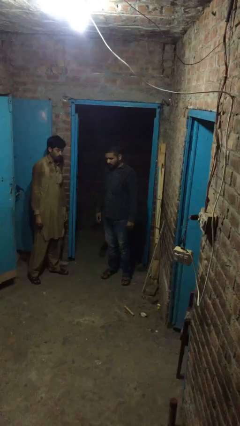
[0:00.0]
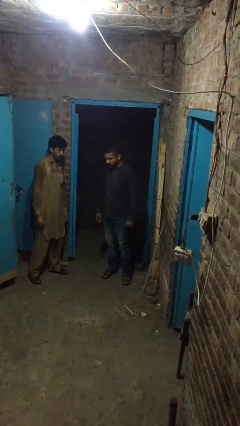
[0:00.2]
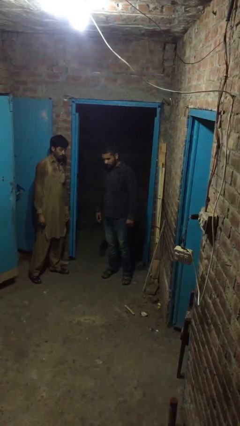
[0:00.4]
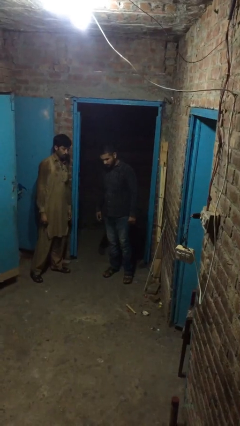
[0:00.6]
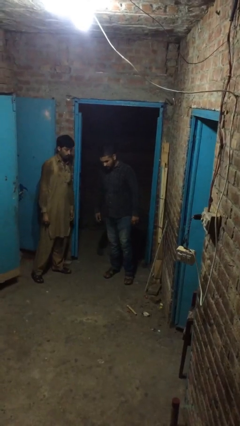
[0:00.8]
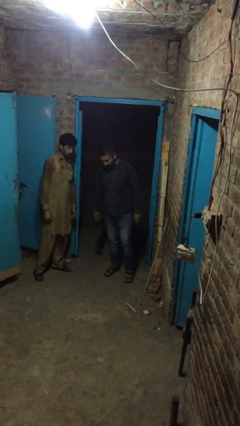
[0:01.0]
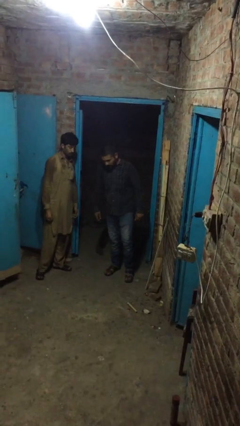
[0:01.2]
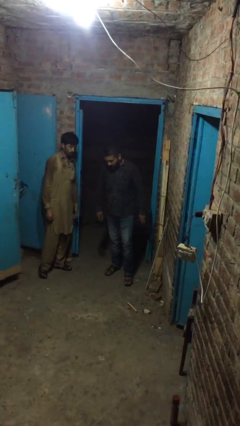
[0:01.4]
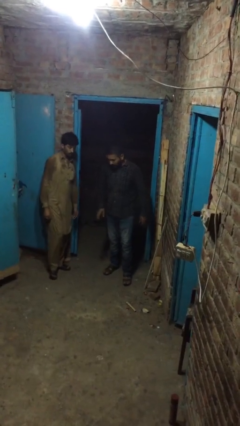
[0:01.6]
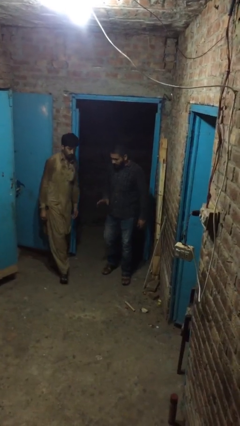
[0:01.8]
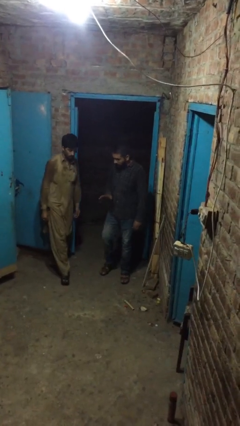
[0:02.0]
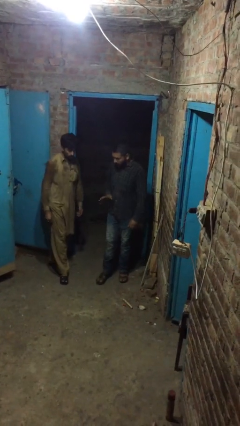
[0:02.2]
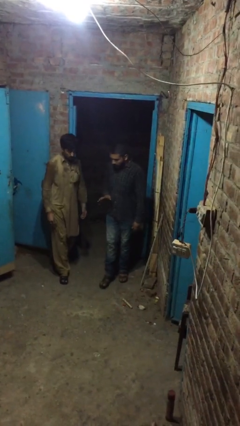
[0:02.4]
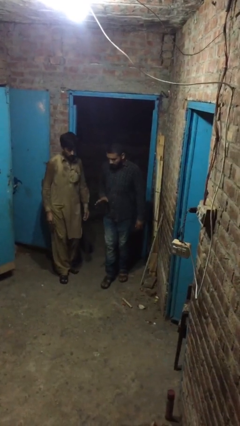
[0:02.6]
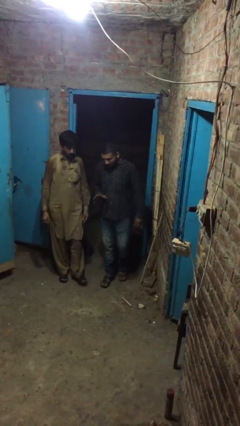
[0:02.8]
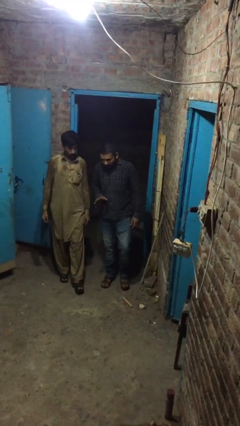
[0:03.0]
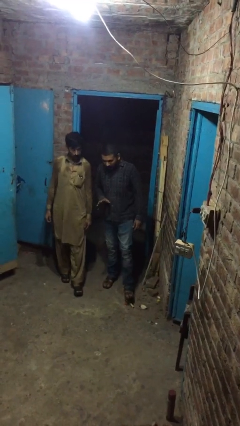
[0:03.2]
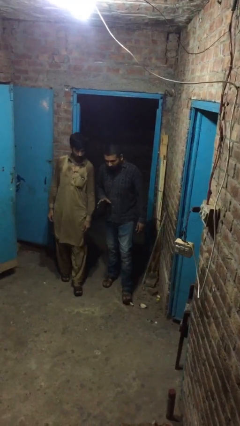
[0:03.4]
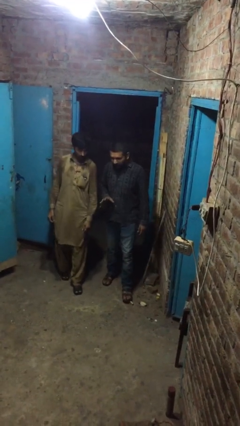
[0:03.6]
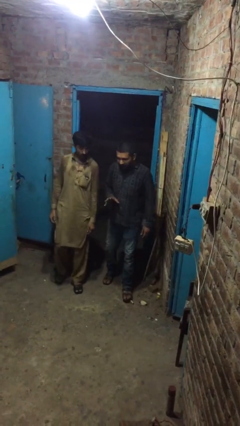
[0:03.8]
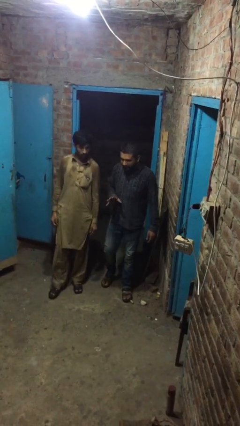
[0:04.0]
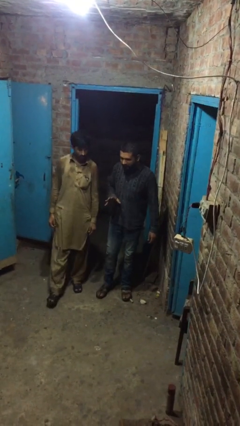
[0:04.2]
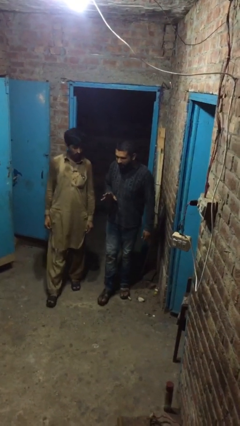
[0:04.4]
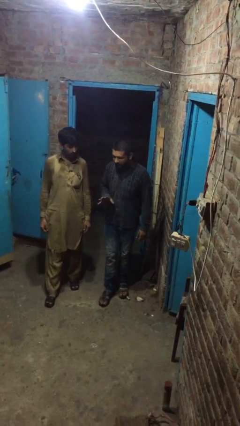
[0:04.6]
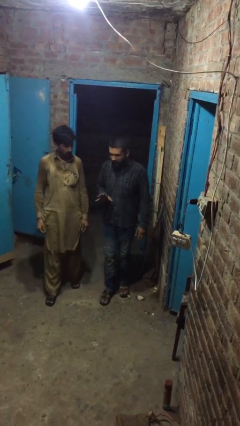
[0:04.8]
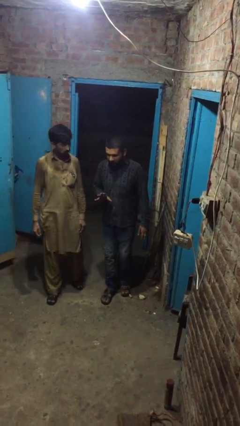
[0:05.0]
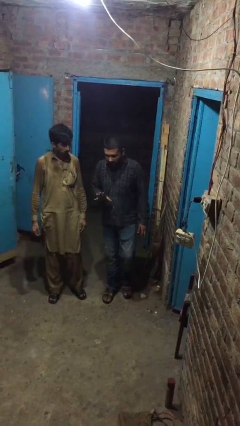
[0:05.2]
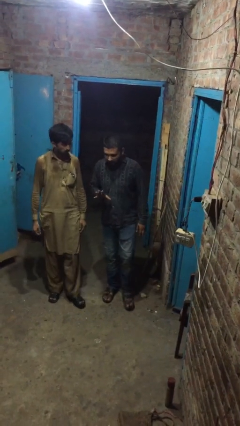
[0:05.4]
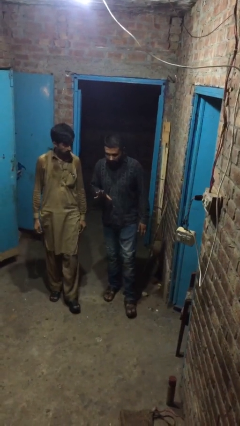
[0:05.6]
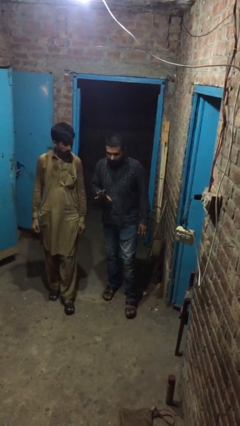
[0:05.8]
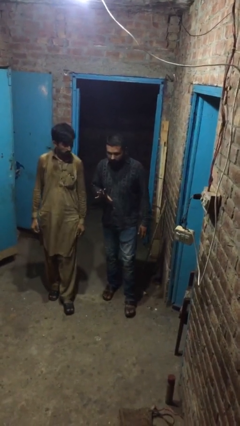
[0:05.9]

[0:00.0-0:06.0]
person talks to person

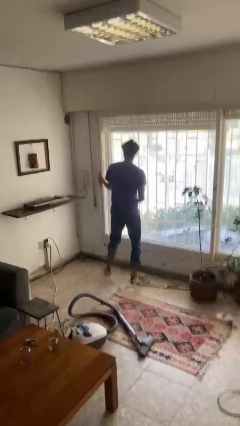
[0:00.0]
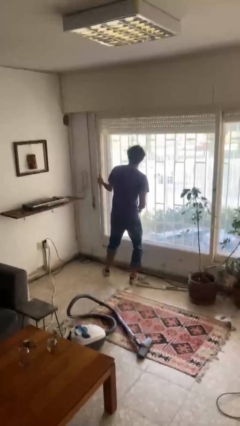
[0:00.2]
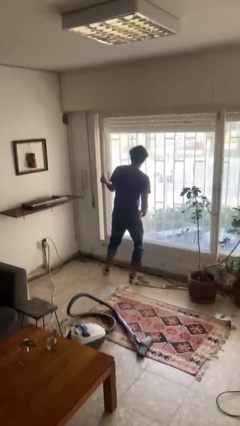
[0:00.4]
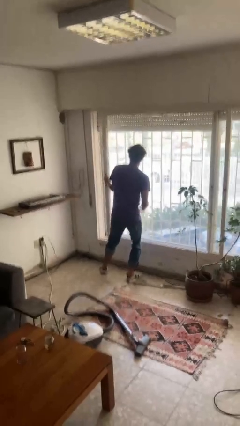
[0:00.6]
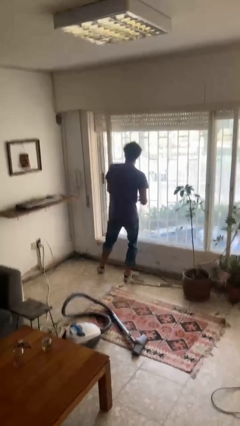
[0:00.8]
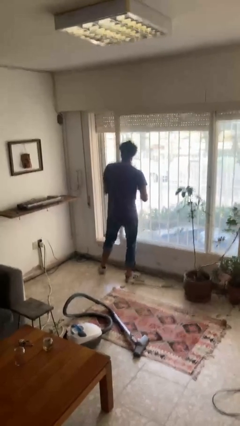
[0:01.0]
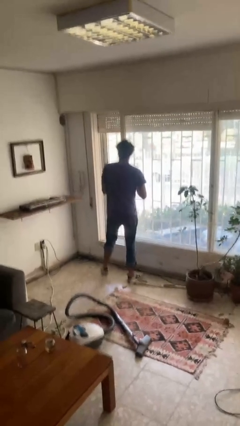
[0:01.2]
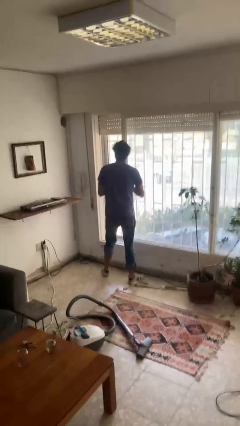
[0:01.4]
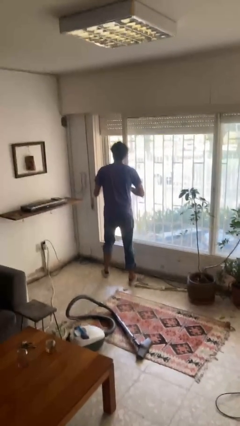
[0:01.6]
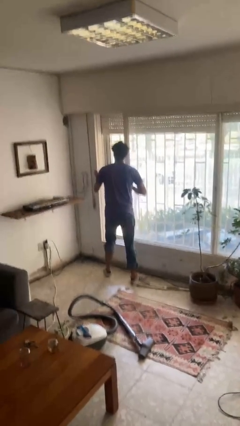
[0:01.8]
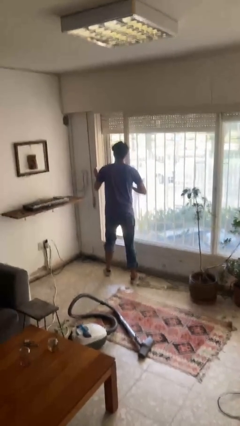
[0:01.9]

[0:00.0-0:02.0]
person opens sliding door

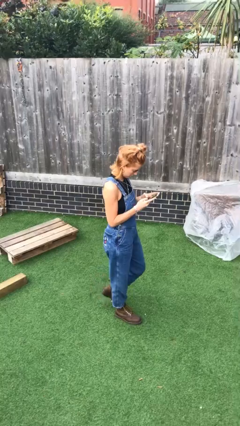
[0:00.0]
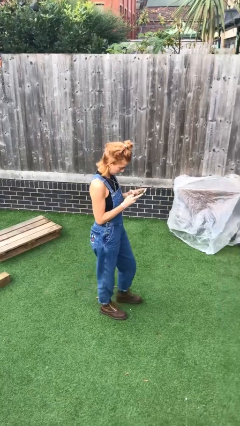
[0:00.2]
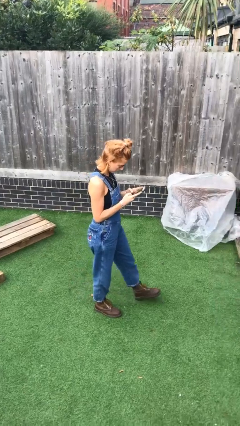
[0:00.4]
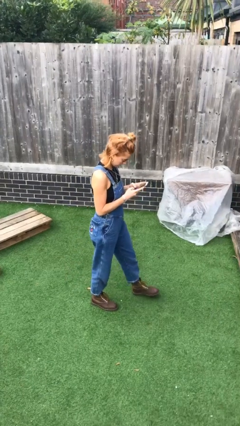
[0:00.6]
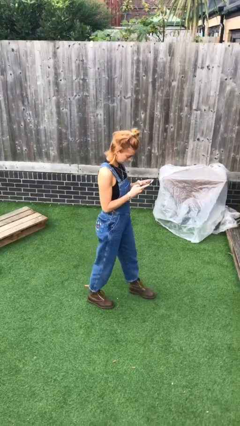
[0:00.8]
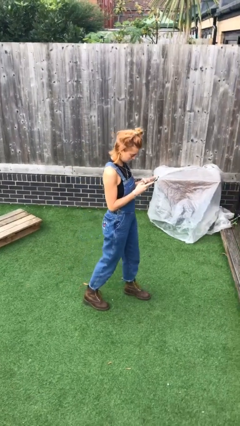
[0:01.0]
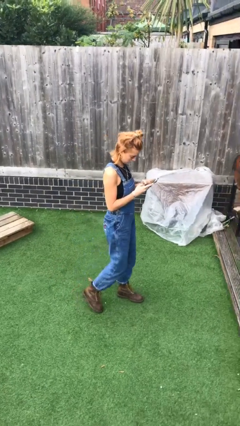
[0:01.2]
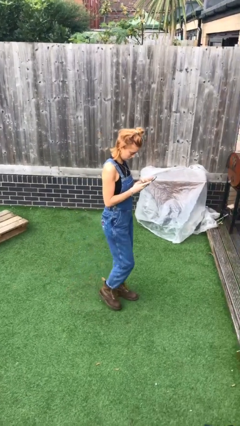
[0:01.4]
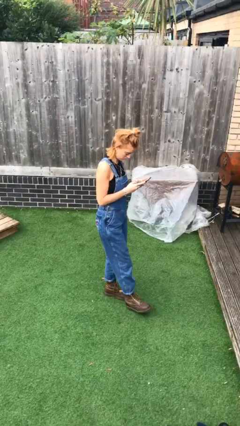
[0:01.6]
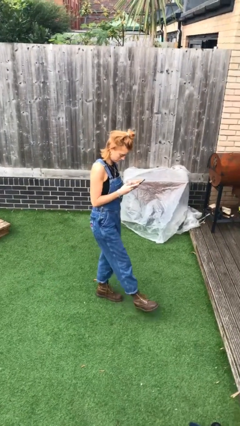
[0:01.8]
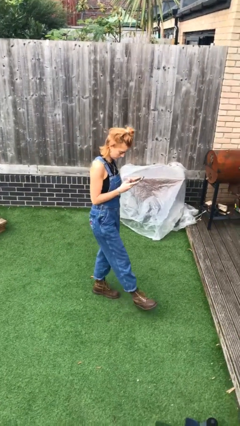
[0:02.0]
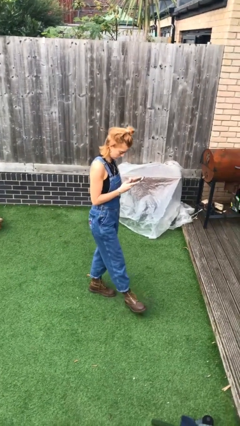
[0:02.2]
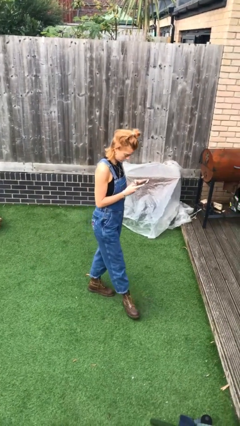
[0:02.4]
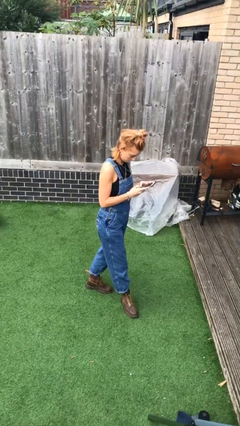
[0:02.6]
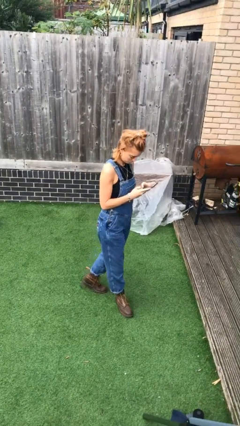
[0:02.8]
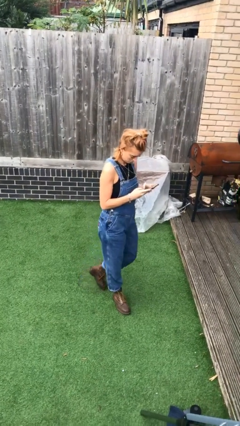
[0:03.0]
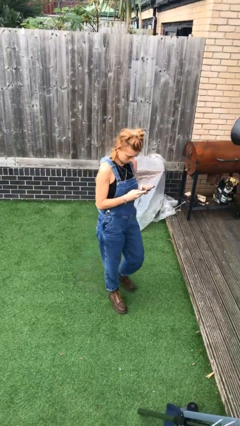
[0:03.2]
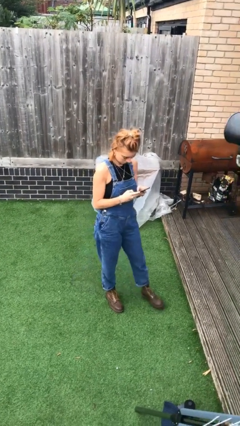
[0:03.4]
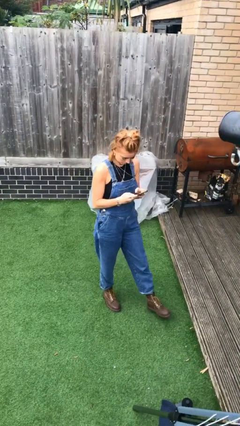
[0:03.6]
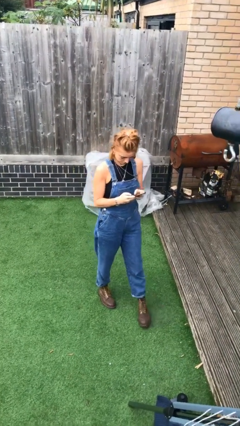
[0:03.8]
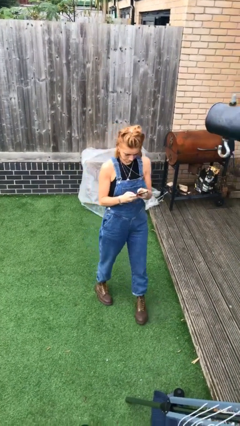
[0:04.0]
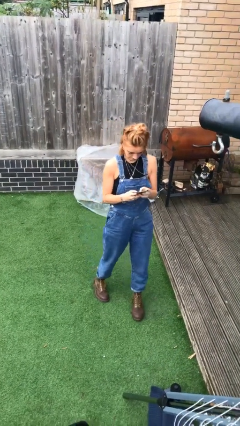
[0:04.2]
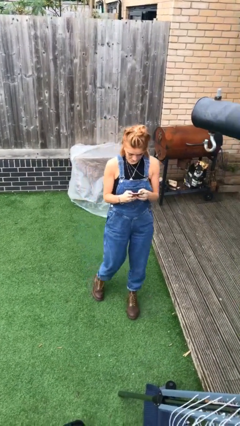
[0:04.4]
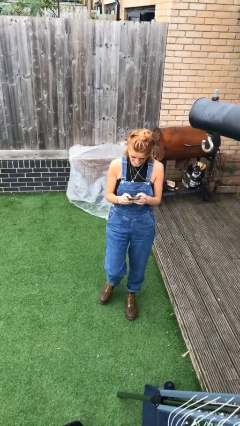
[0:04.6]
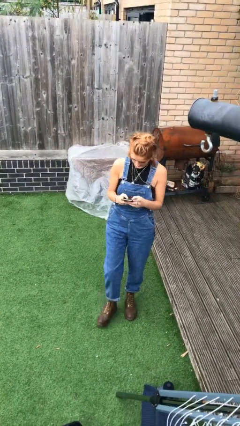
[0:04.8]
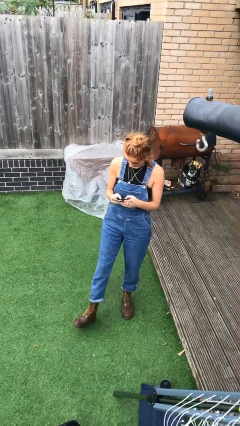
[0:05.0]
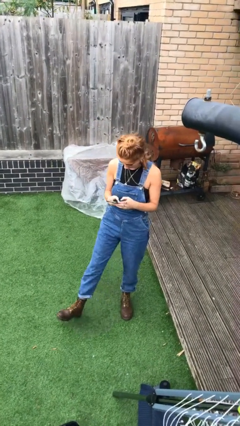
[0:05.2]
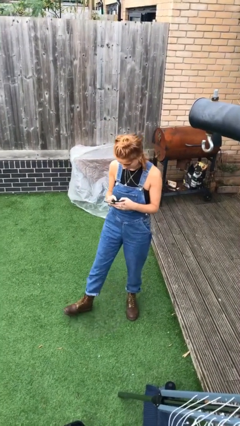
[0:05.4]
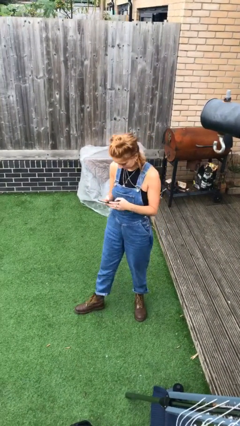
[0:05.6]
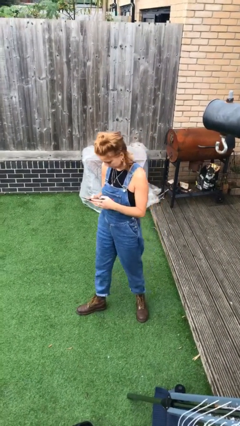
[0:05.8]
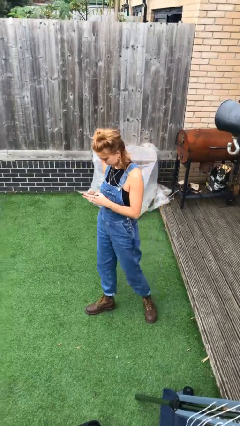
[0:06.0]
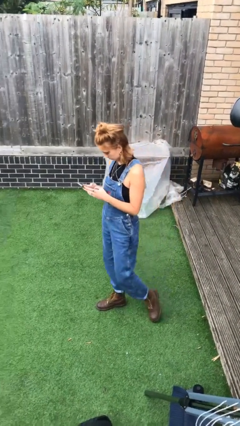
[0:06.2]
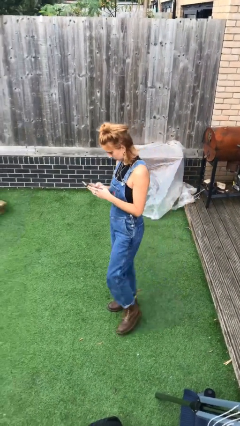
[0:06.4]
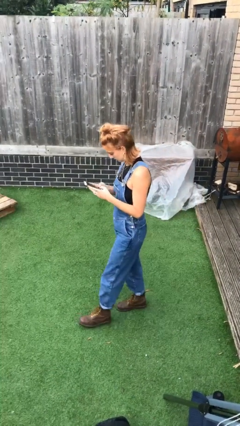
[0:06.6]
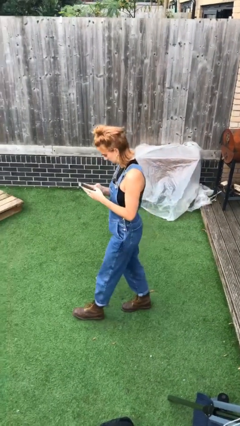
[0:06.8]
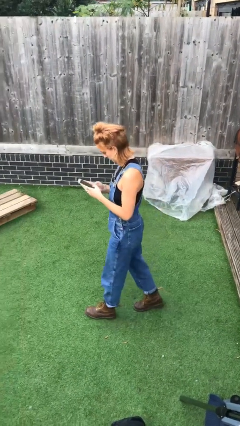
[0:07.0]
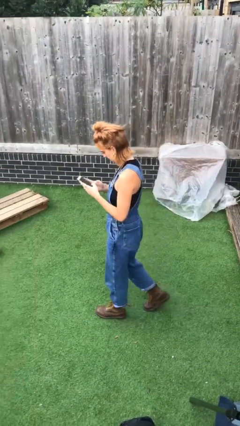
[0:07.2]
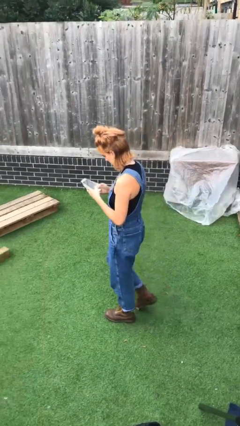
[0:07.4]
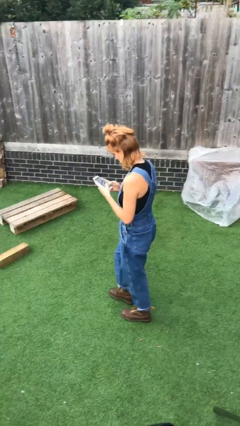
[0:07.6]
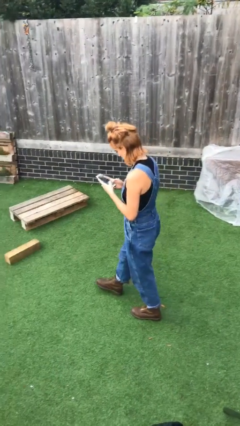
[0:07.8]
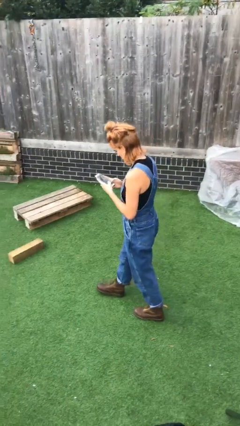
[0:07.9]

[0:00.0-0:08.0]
person texts on phone

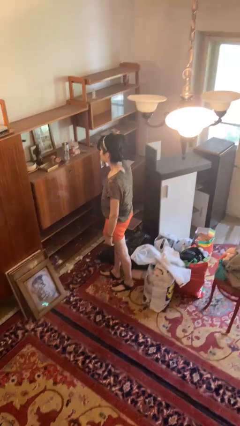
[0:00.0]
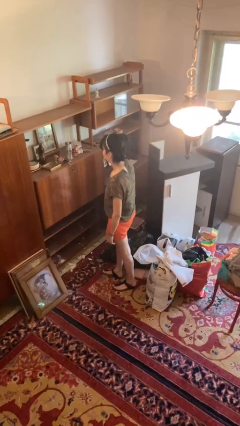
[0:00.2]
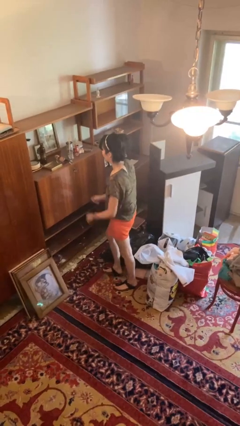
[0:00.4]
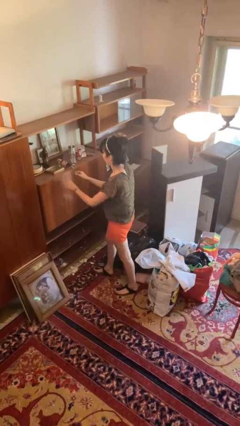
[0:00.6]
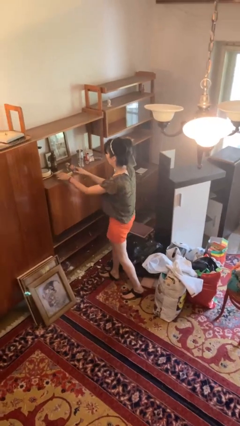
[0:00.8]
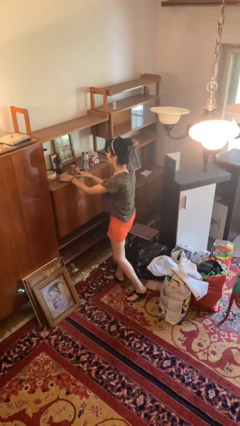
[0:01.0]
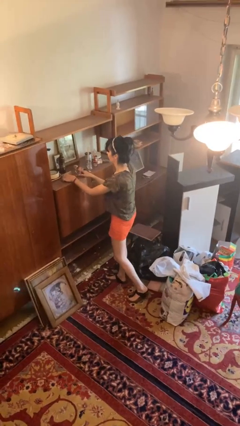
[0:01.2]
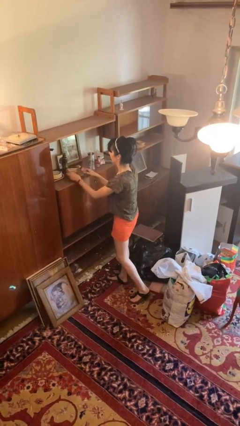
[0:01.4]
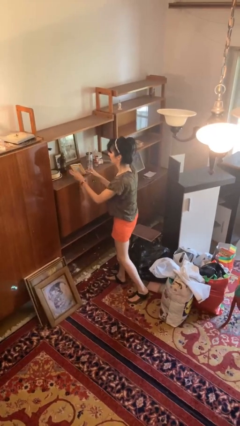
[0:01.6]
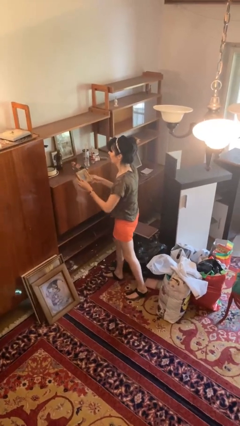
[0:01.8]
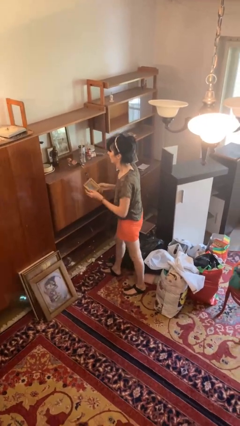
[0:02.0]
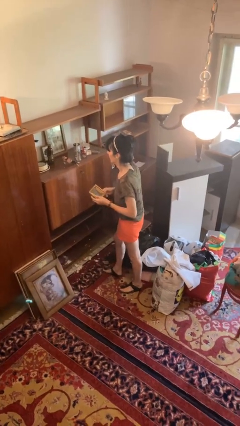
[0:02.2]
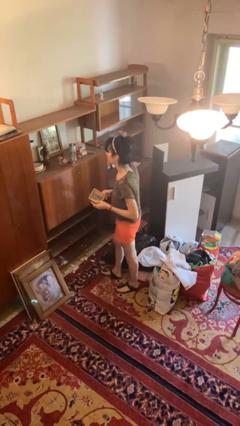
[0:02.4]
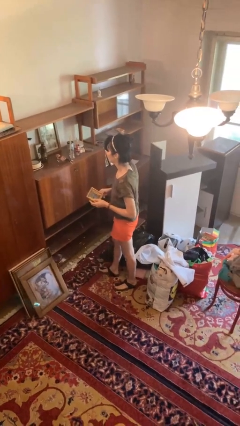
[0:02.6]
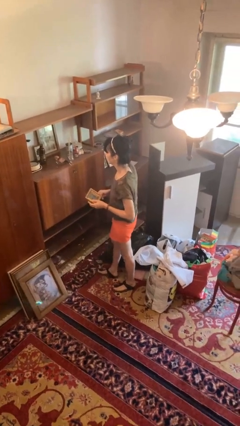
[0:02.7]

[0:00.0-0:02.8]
person picks up object from countertop
